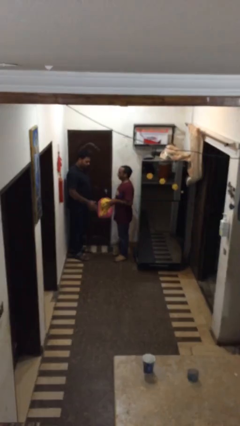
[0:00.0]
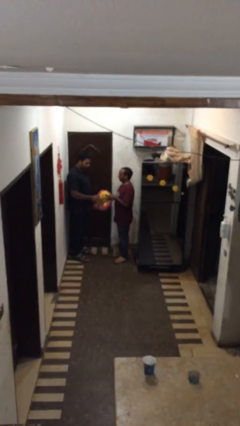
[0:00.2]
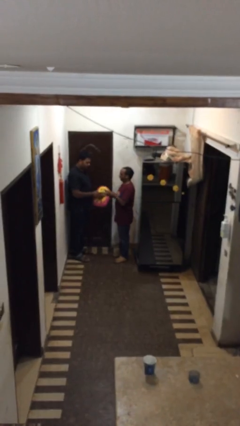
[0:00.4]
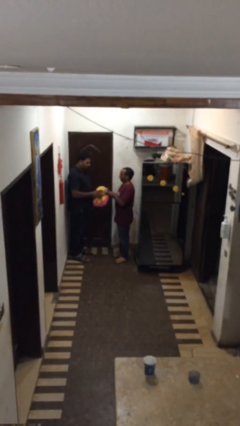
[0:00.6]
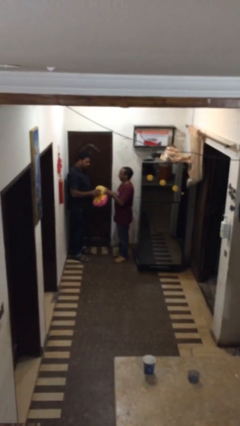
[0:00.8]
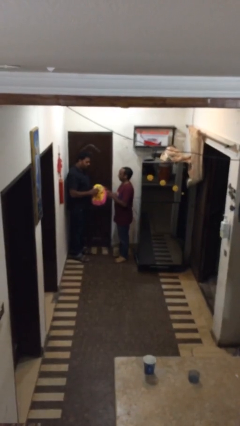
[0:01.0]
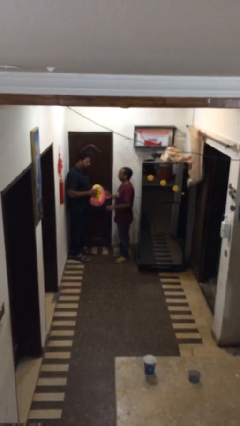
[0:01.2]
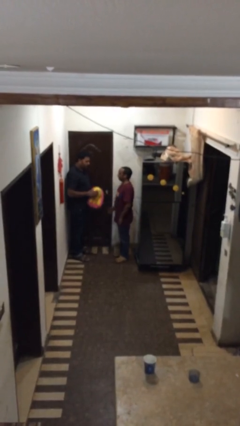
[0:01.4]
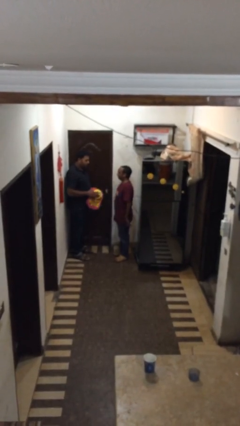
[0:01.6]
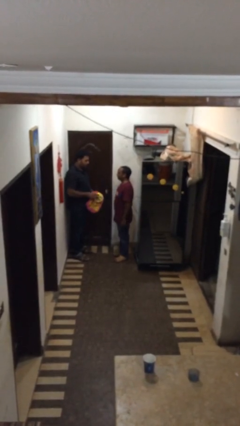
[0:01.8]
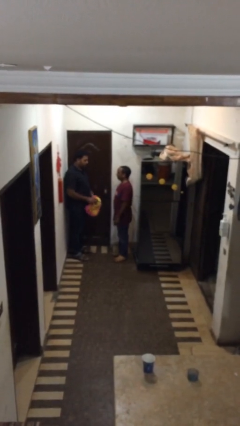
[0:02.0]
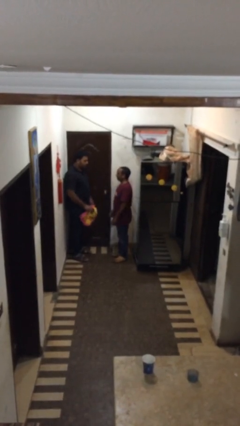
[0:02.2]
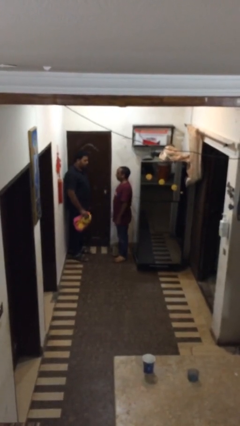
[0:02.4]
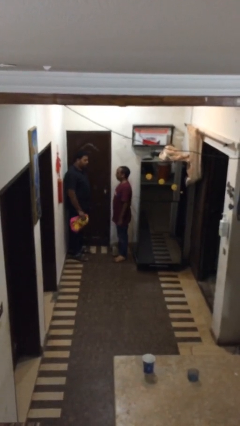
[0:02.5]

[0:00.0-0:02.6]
person transfers object to person

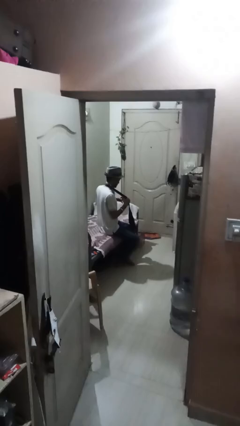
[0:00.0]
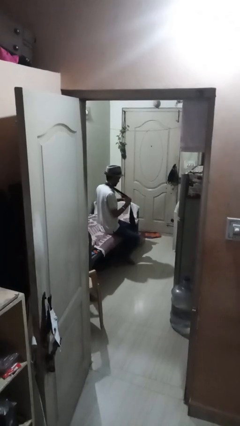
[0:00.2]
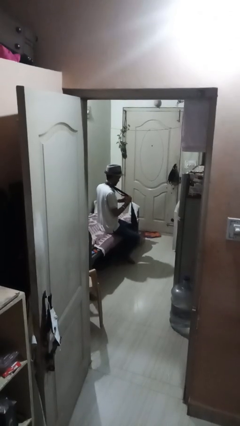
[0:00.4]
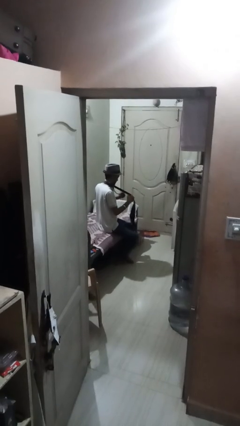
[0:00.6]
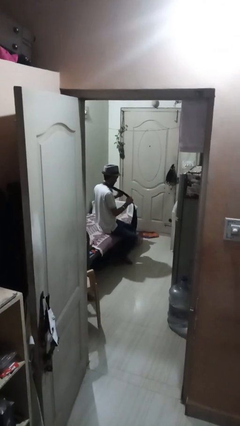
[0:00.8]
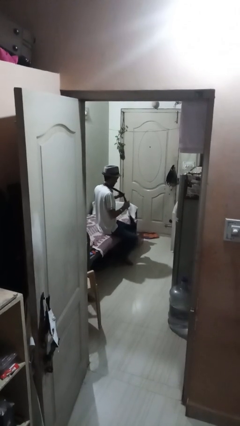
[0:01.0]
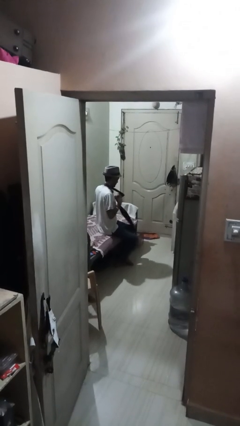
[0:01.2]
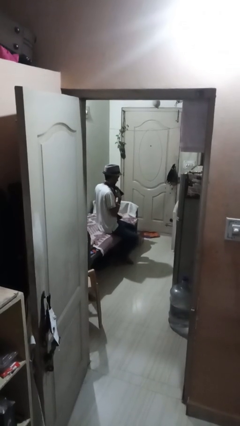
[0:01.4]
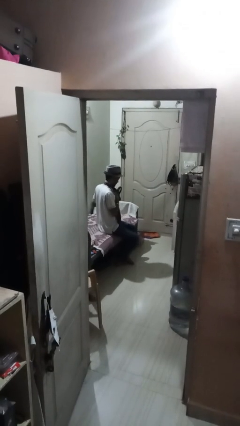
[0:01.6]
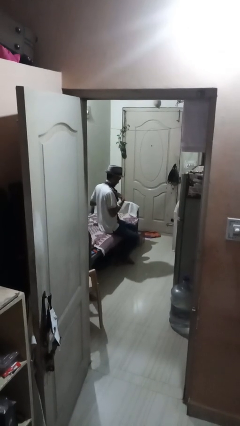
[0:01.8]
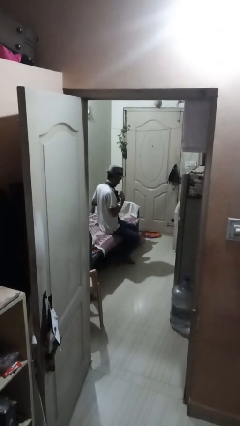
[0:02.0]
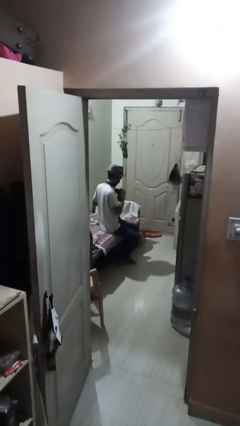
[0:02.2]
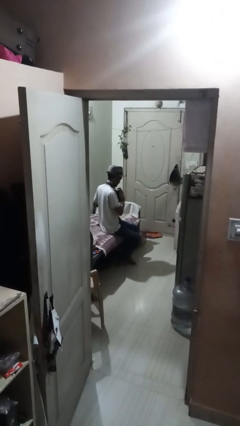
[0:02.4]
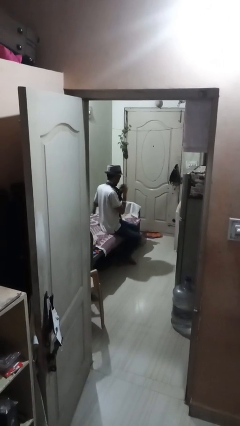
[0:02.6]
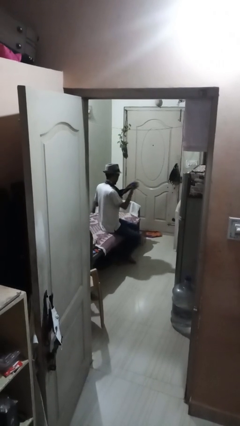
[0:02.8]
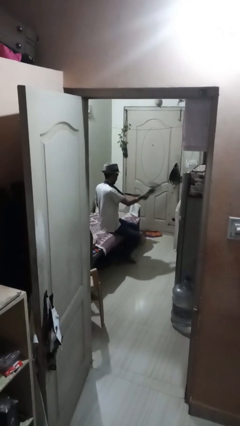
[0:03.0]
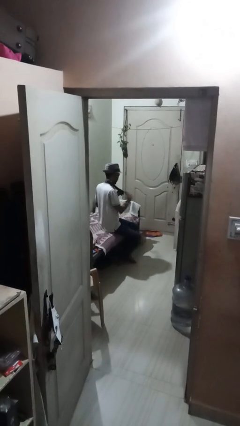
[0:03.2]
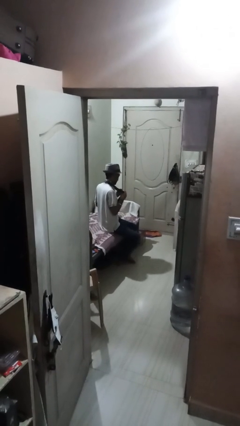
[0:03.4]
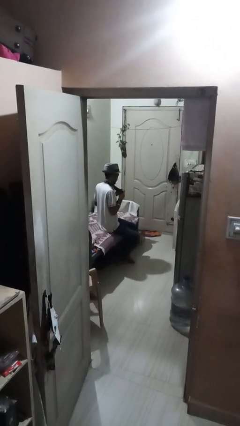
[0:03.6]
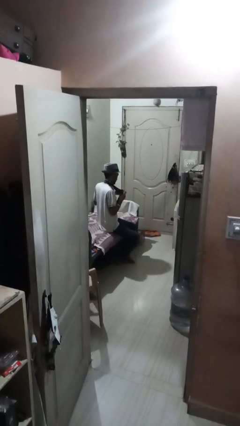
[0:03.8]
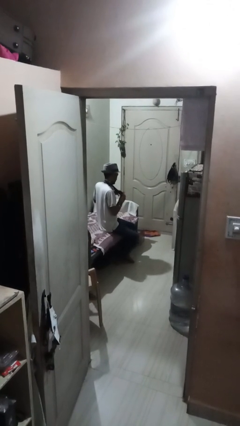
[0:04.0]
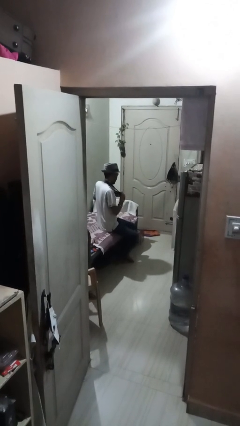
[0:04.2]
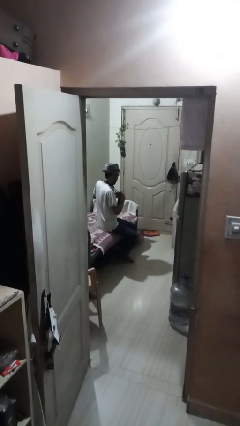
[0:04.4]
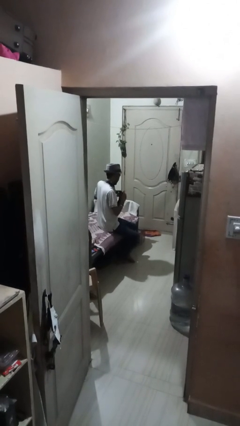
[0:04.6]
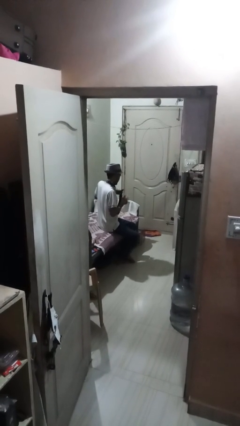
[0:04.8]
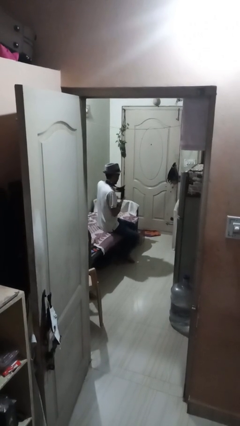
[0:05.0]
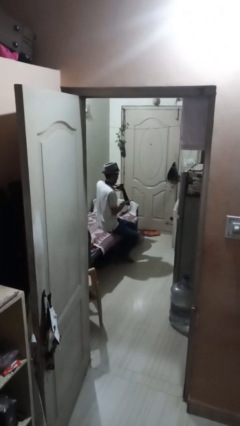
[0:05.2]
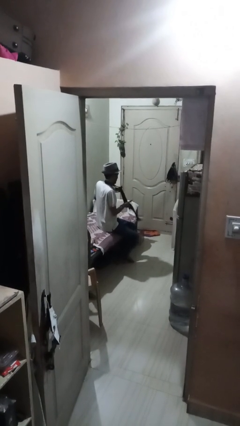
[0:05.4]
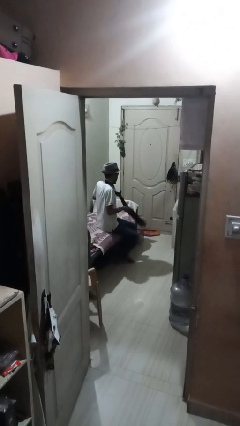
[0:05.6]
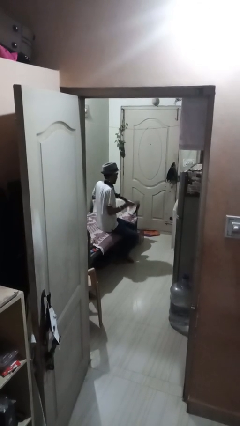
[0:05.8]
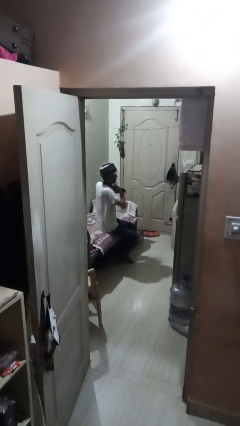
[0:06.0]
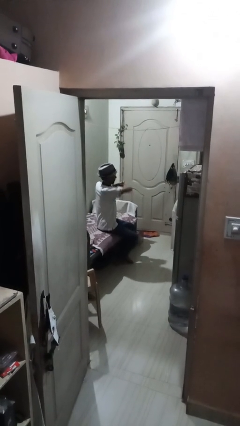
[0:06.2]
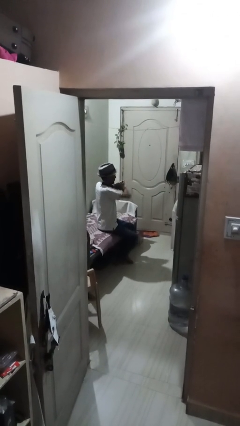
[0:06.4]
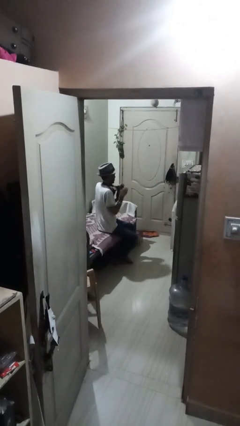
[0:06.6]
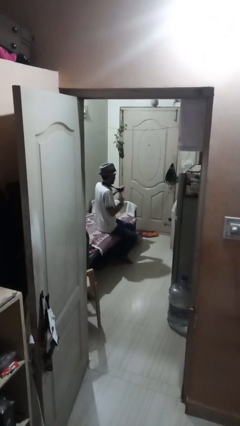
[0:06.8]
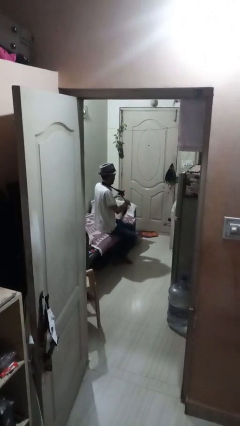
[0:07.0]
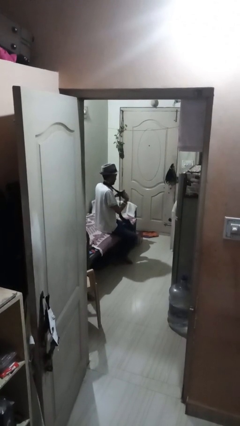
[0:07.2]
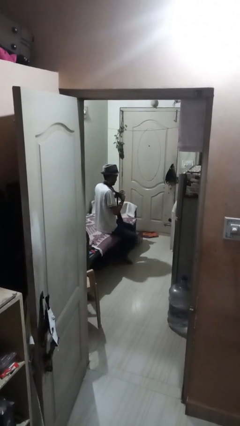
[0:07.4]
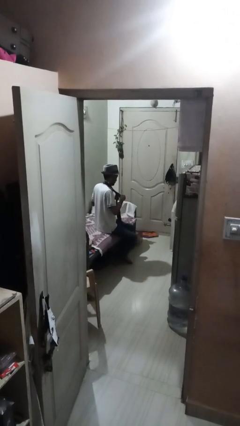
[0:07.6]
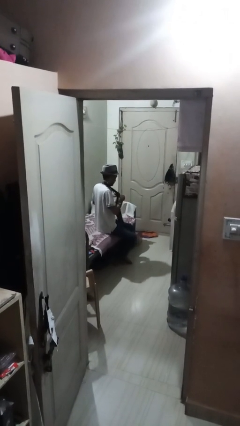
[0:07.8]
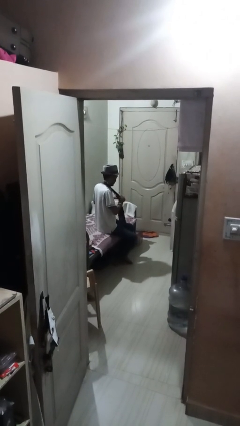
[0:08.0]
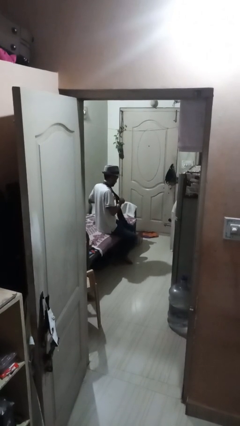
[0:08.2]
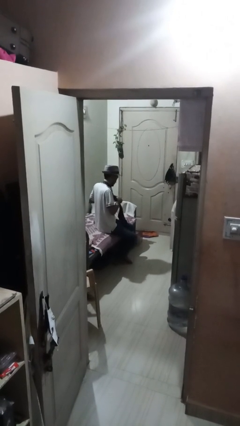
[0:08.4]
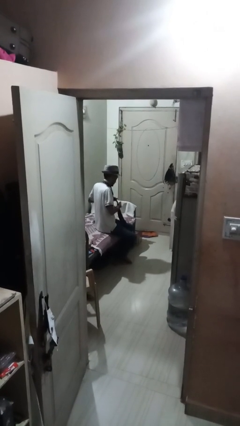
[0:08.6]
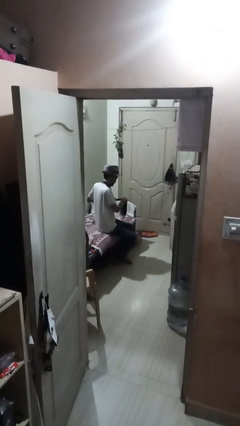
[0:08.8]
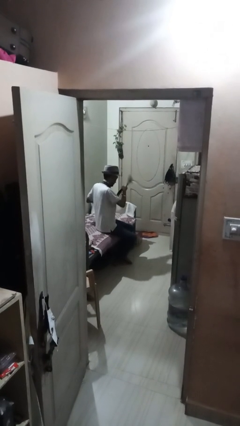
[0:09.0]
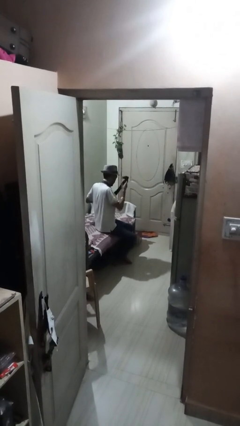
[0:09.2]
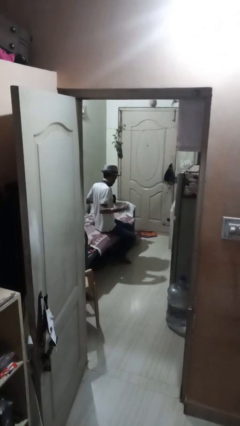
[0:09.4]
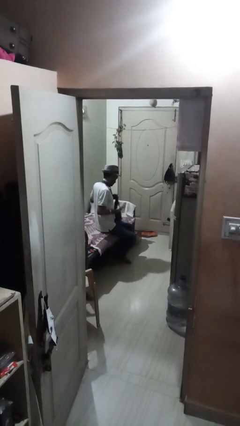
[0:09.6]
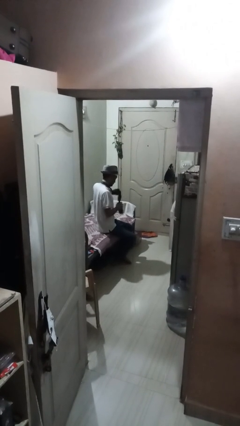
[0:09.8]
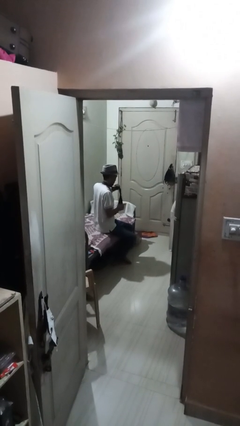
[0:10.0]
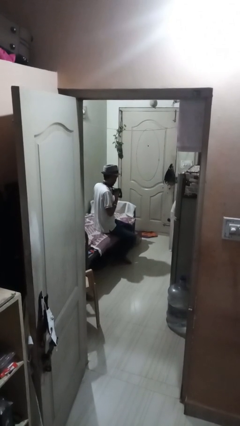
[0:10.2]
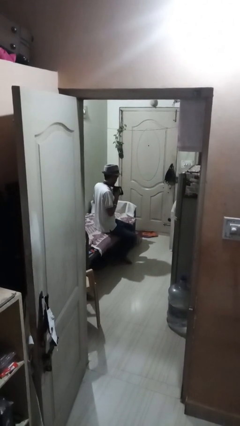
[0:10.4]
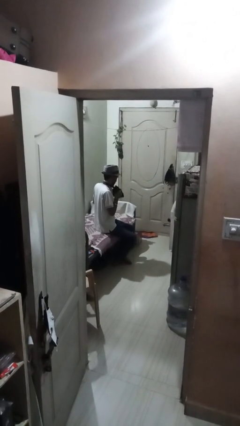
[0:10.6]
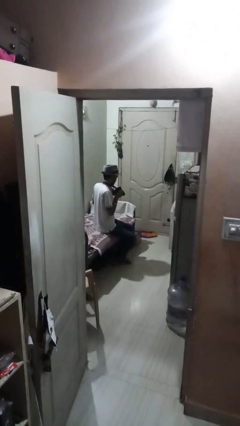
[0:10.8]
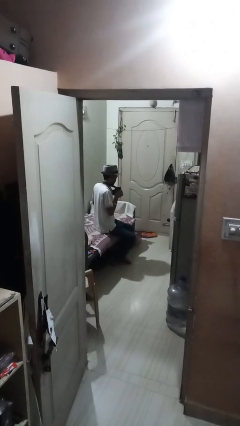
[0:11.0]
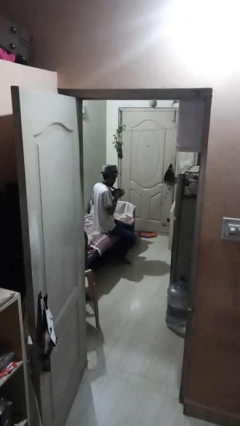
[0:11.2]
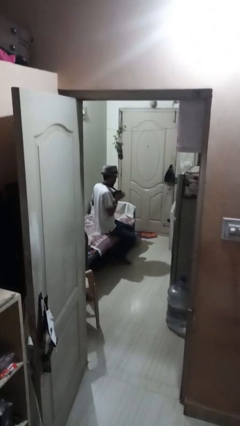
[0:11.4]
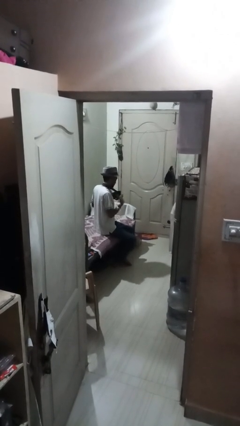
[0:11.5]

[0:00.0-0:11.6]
person puts on necktie

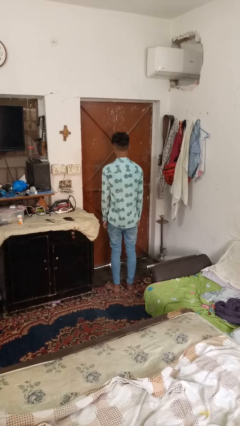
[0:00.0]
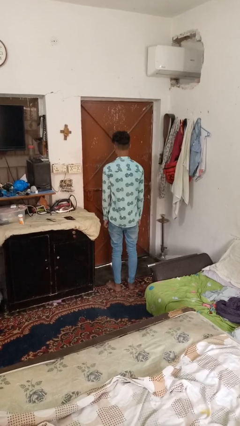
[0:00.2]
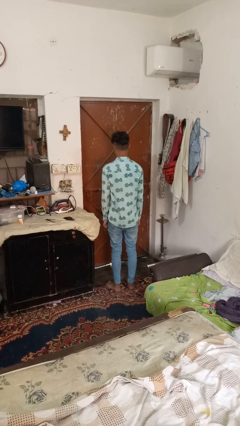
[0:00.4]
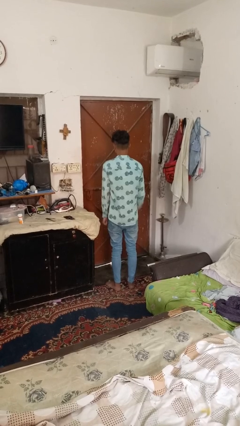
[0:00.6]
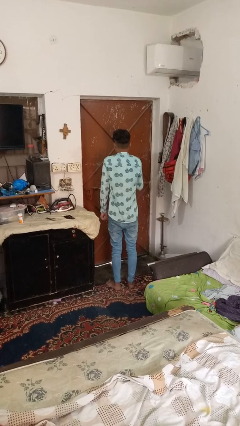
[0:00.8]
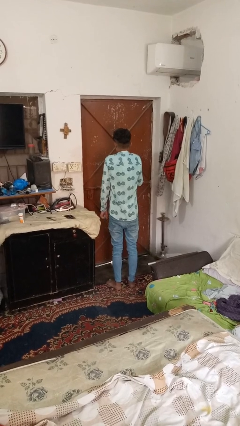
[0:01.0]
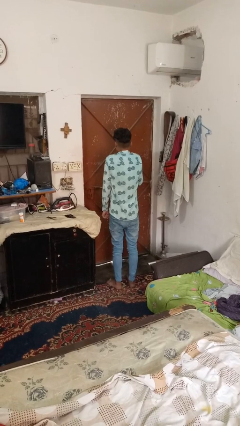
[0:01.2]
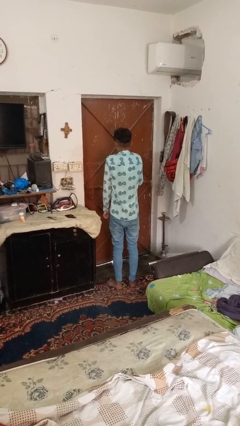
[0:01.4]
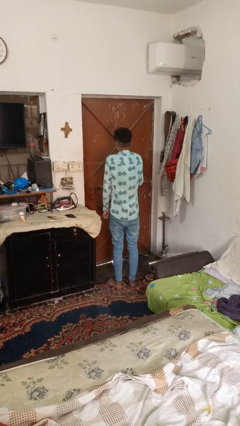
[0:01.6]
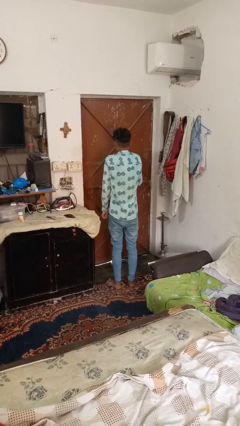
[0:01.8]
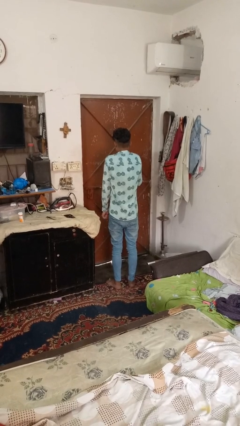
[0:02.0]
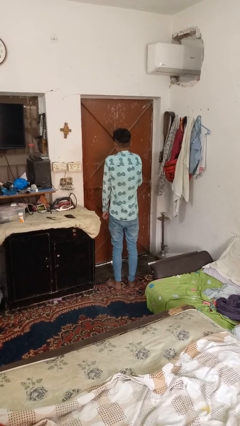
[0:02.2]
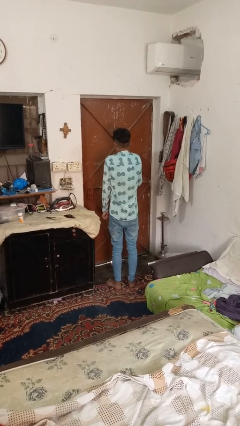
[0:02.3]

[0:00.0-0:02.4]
person shrugs

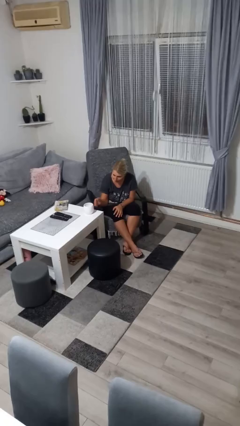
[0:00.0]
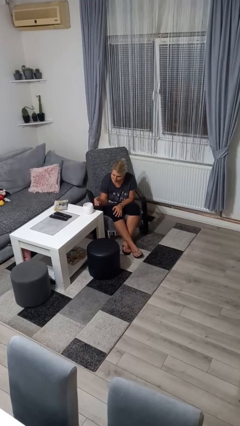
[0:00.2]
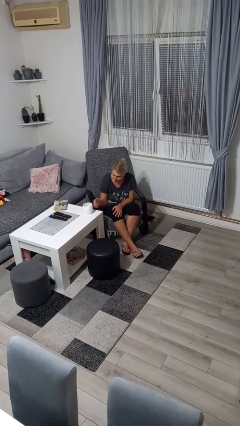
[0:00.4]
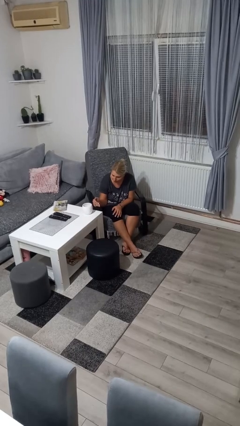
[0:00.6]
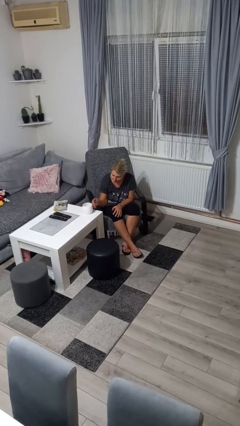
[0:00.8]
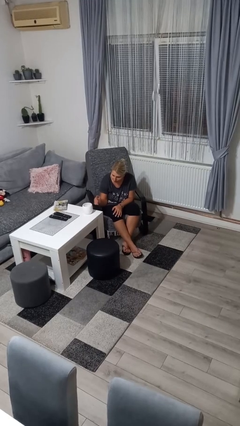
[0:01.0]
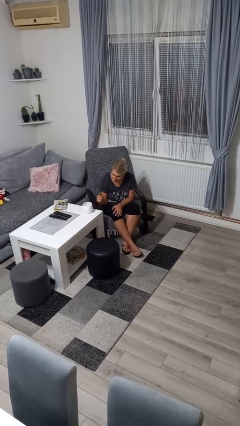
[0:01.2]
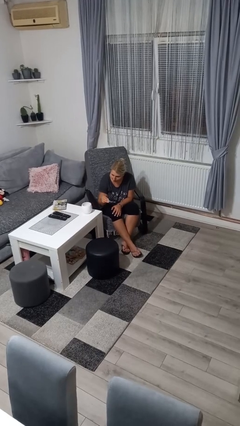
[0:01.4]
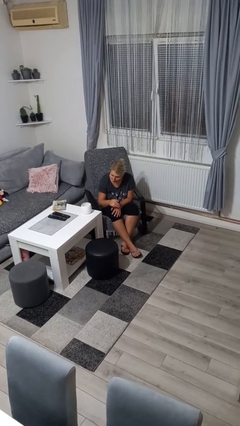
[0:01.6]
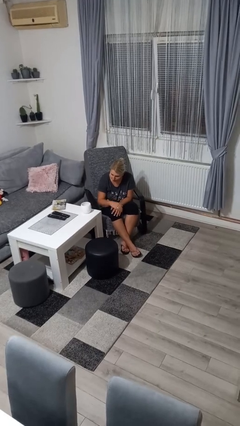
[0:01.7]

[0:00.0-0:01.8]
person taps object with finger
